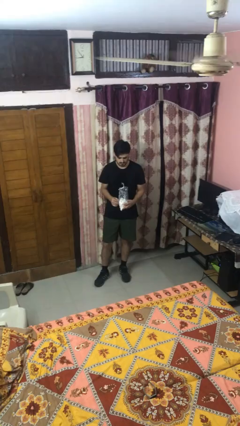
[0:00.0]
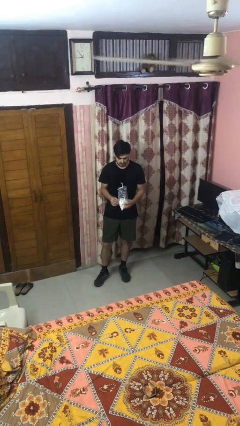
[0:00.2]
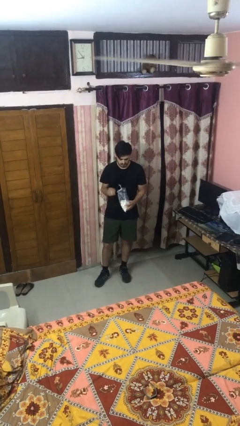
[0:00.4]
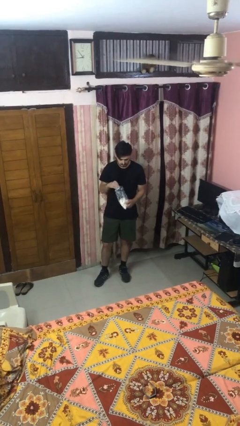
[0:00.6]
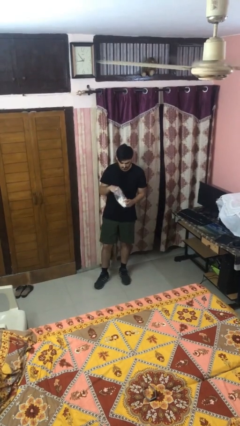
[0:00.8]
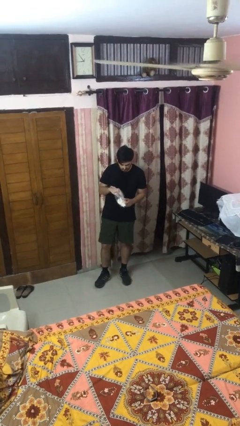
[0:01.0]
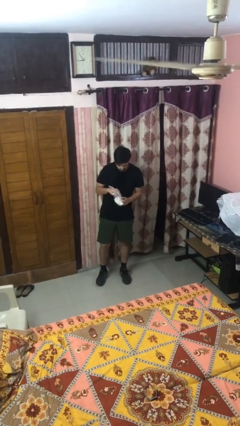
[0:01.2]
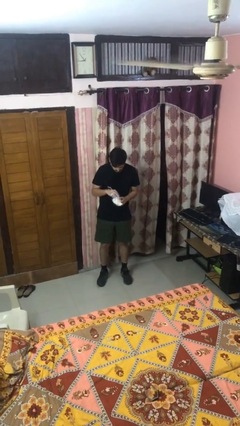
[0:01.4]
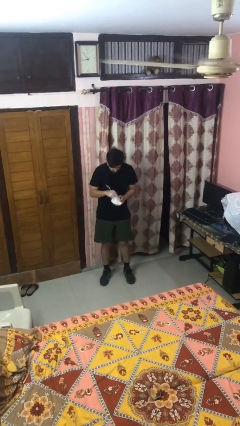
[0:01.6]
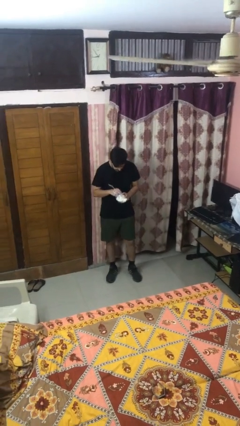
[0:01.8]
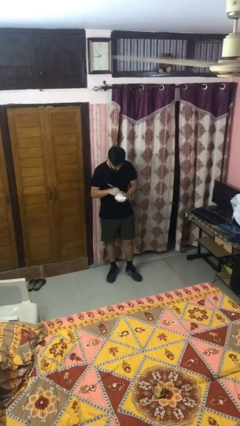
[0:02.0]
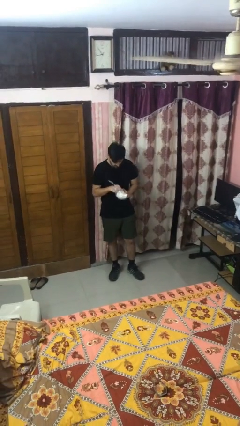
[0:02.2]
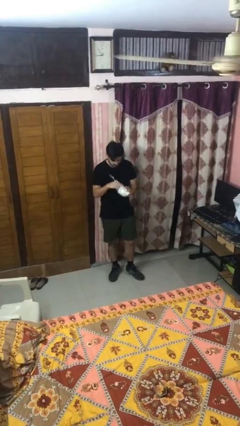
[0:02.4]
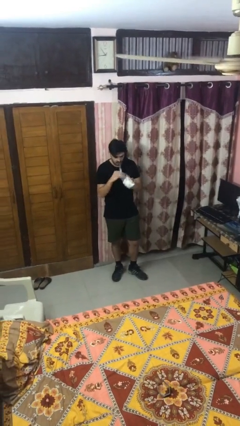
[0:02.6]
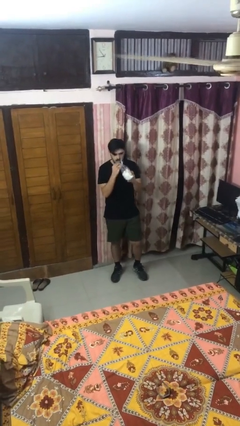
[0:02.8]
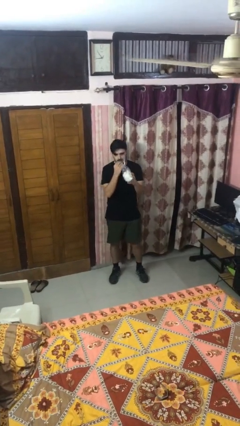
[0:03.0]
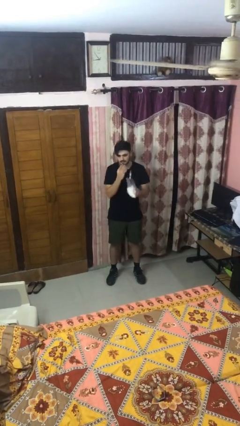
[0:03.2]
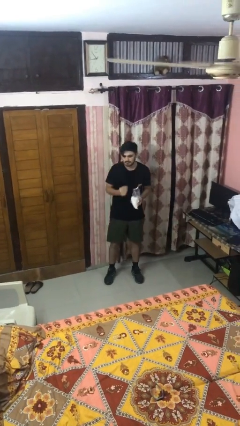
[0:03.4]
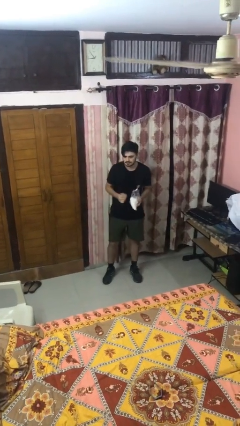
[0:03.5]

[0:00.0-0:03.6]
person eats snack from bag

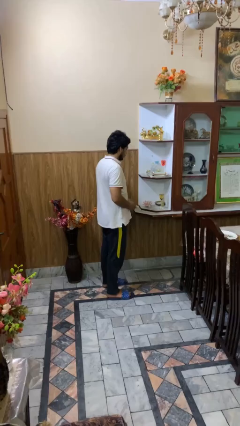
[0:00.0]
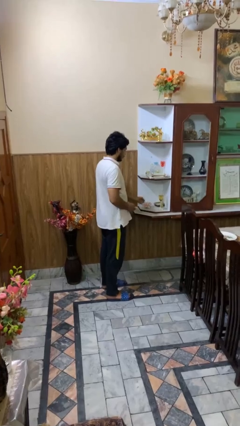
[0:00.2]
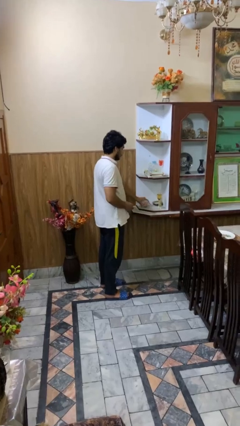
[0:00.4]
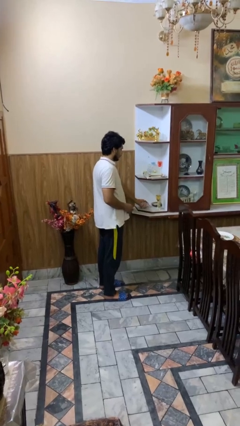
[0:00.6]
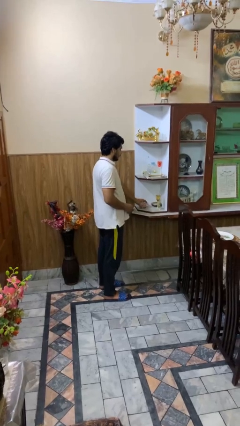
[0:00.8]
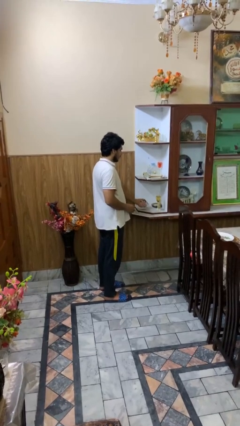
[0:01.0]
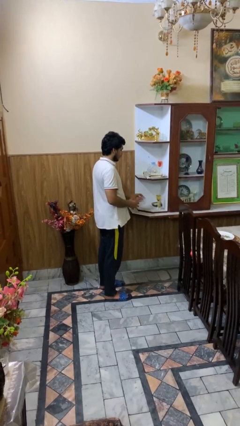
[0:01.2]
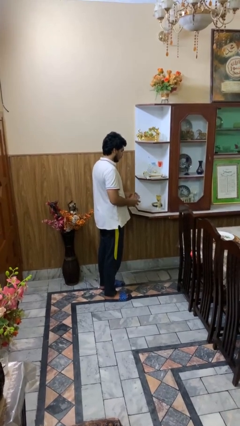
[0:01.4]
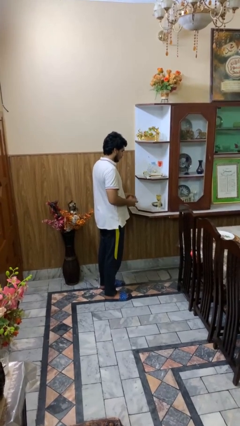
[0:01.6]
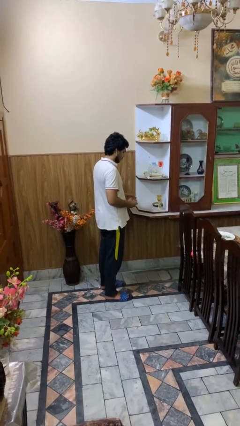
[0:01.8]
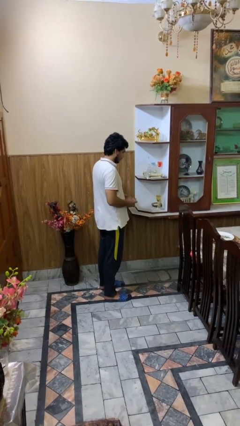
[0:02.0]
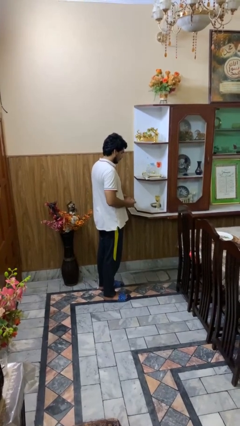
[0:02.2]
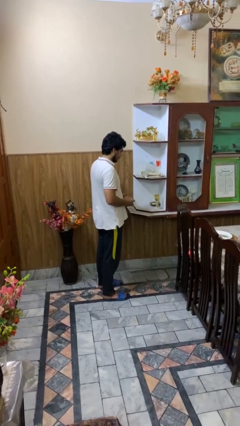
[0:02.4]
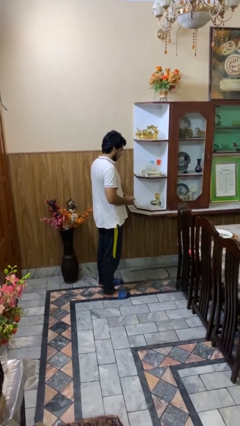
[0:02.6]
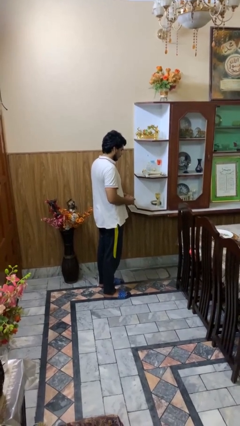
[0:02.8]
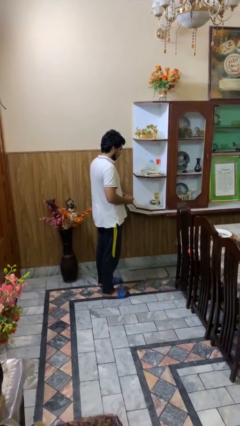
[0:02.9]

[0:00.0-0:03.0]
person picks up object from cabinet

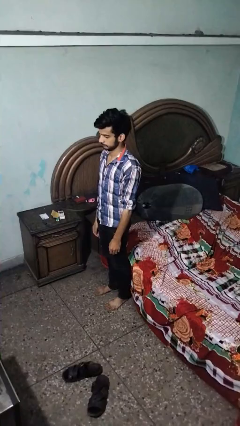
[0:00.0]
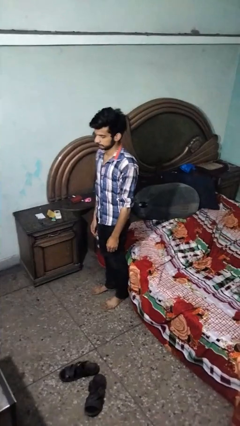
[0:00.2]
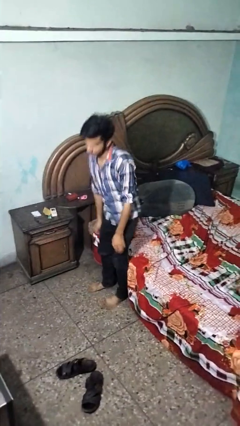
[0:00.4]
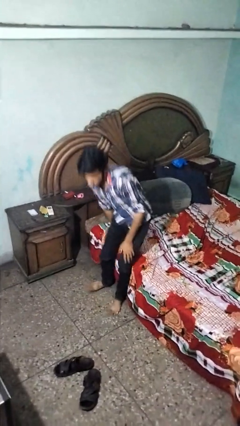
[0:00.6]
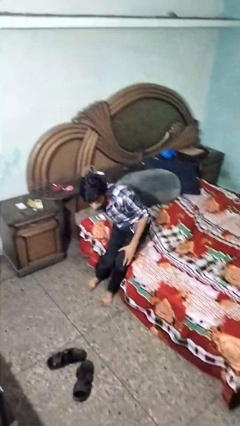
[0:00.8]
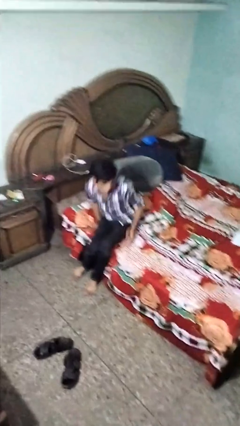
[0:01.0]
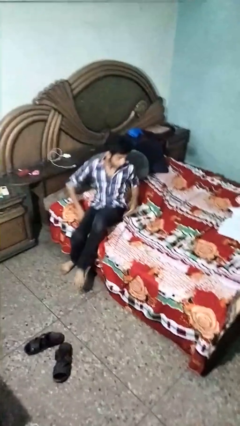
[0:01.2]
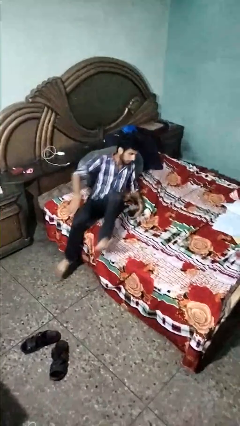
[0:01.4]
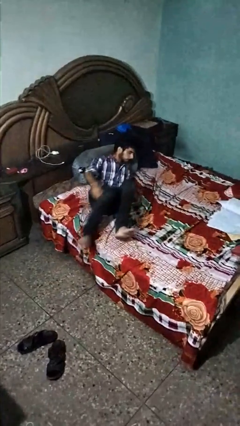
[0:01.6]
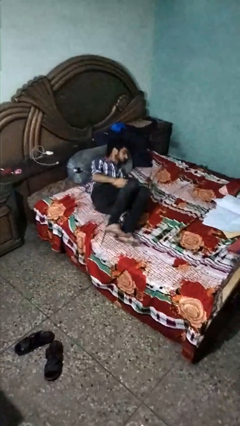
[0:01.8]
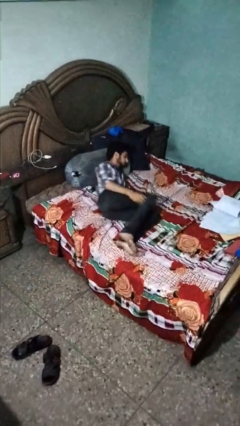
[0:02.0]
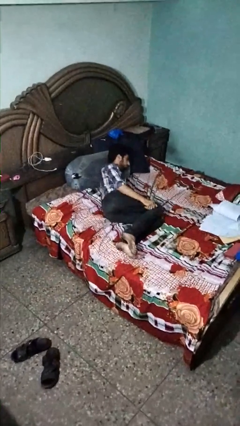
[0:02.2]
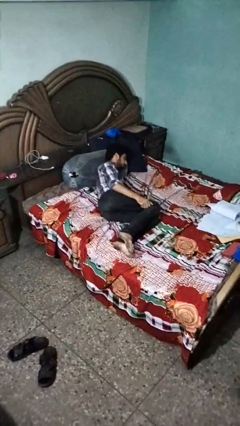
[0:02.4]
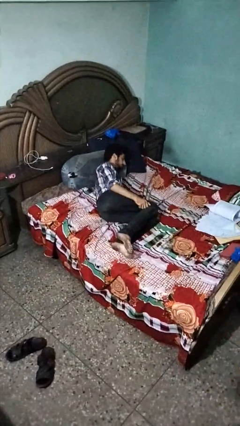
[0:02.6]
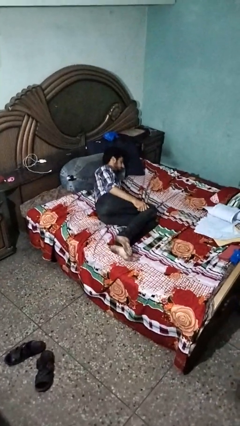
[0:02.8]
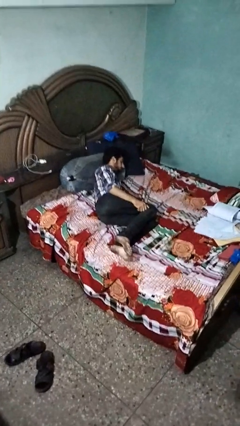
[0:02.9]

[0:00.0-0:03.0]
person lies down on bed

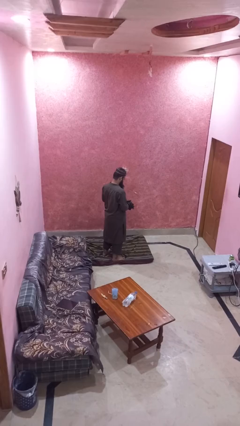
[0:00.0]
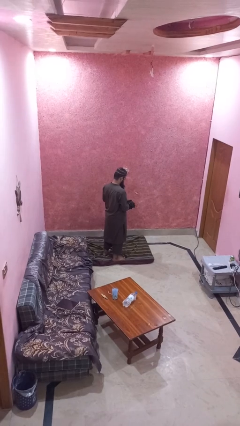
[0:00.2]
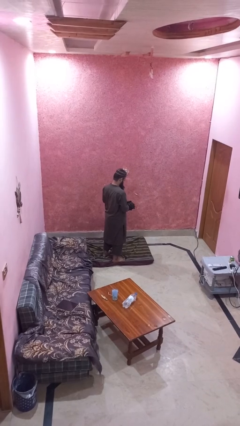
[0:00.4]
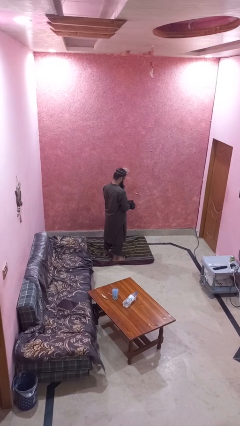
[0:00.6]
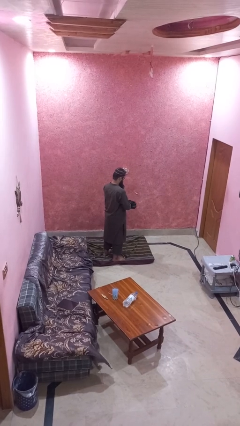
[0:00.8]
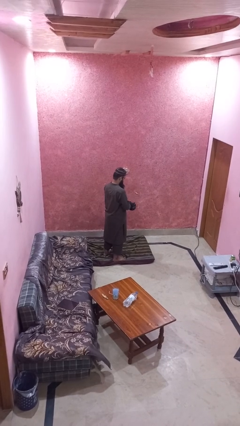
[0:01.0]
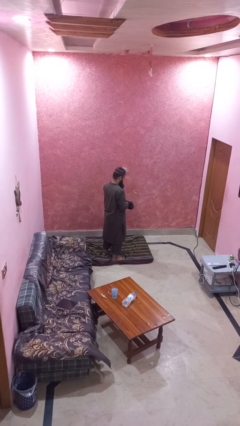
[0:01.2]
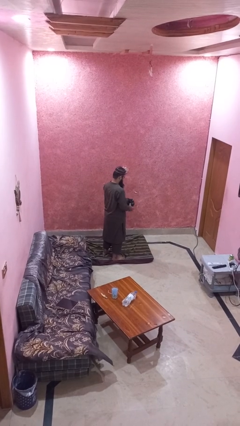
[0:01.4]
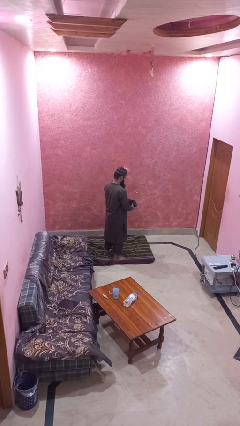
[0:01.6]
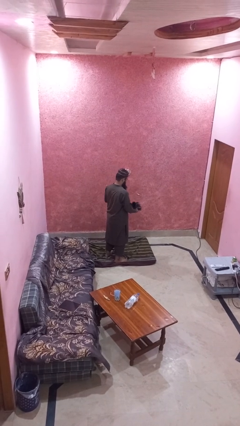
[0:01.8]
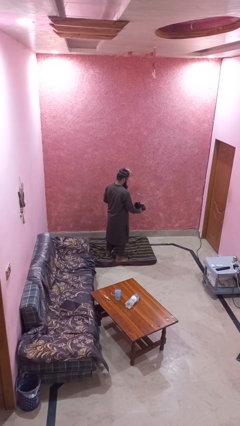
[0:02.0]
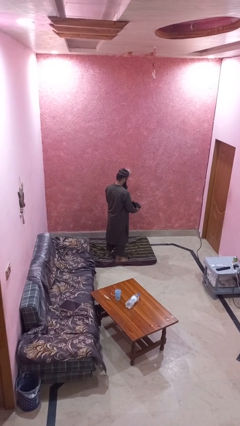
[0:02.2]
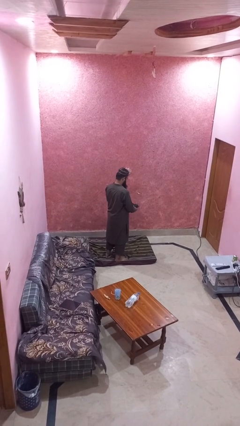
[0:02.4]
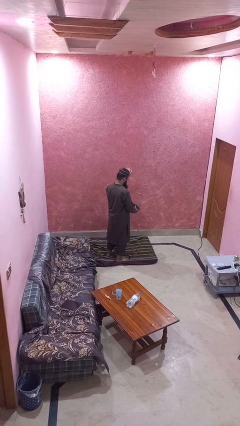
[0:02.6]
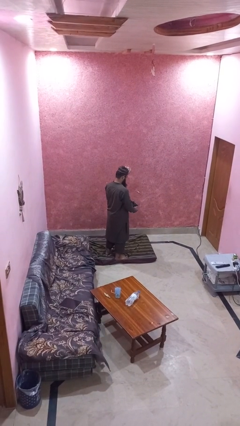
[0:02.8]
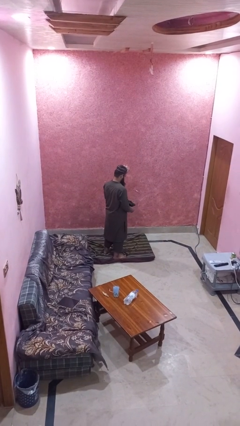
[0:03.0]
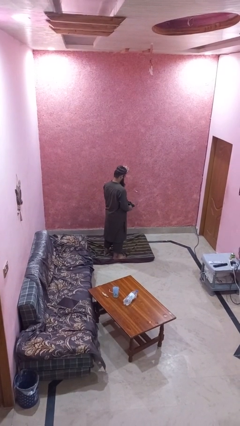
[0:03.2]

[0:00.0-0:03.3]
person takes off gloves

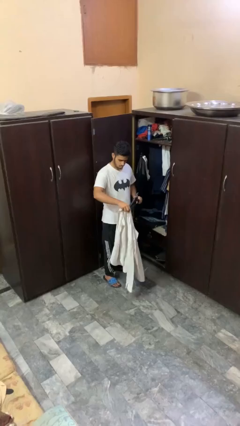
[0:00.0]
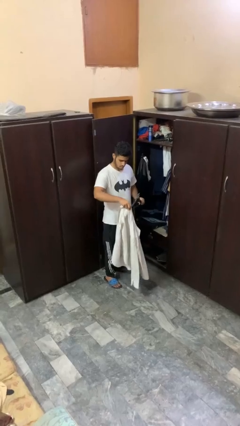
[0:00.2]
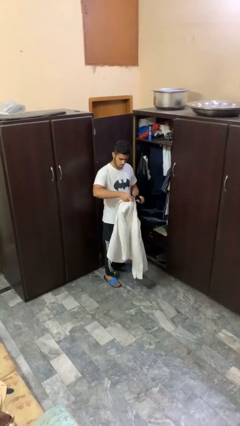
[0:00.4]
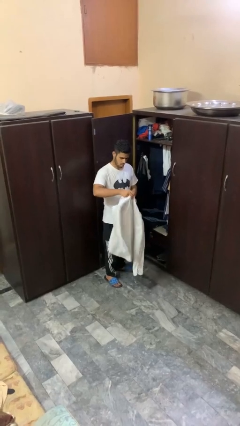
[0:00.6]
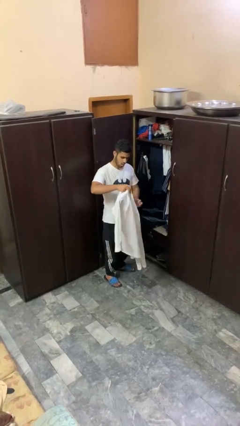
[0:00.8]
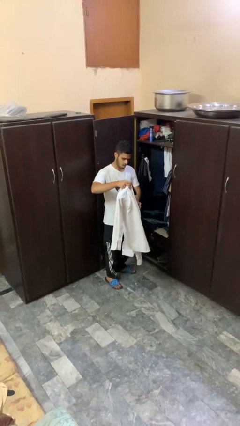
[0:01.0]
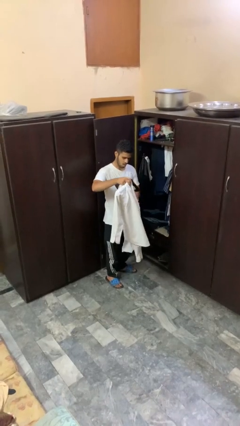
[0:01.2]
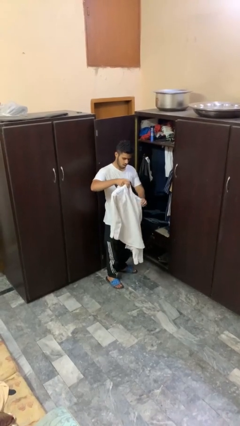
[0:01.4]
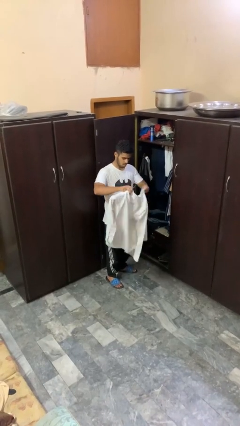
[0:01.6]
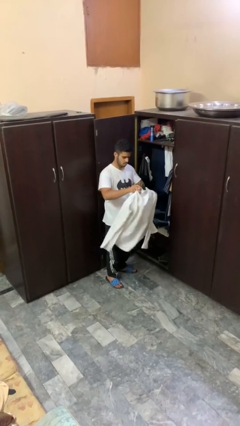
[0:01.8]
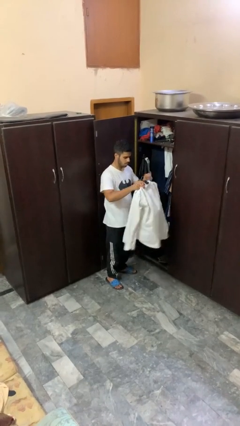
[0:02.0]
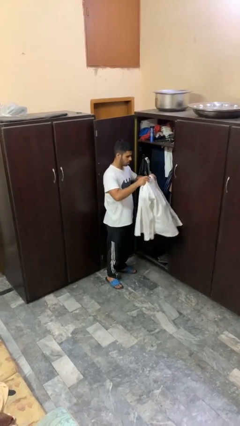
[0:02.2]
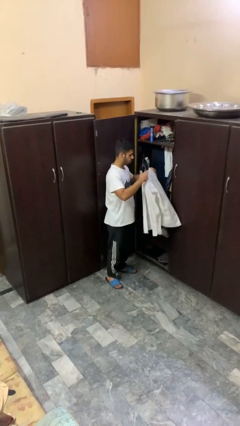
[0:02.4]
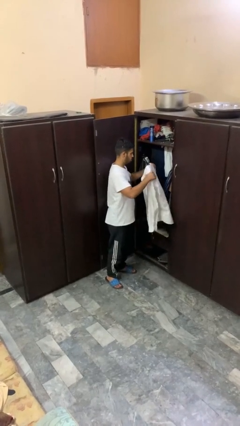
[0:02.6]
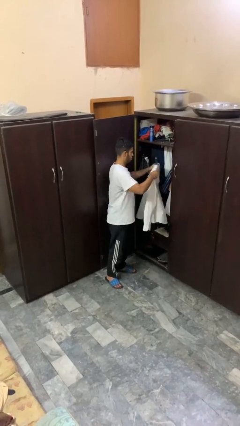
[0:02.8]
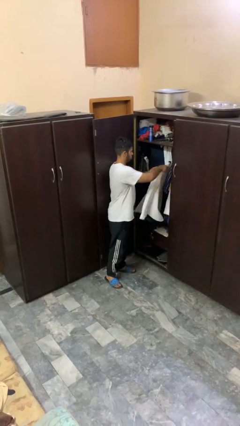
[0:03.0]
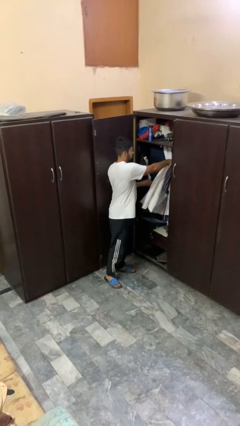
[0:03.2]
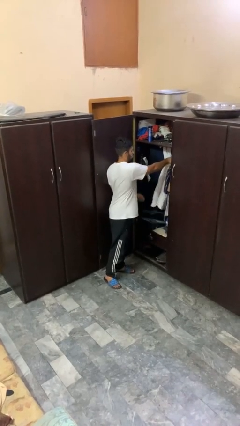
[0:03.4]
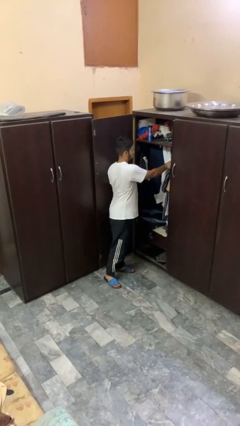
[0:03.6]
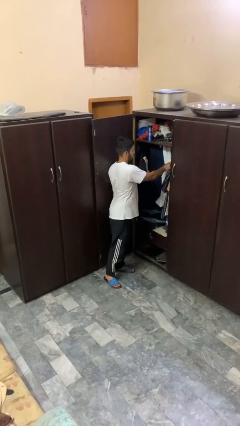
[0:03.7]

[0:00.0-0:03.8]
person puts clothes into closet

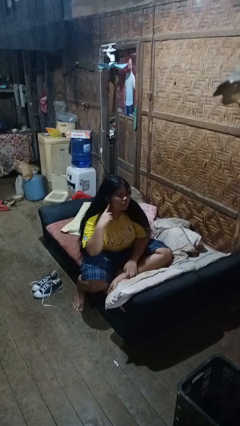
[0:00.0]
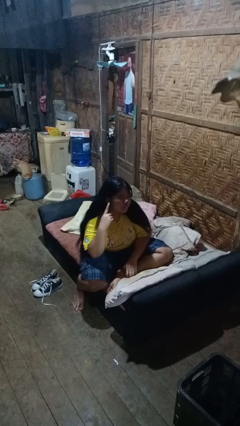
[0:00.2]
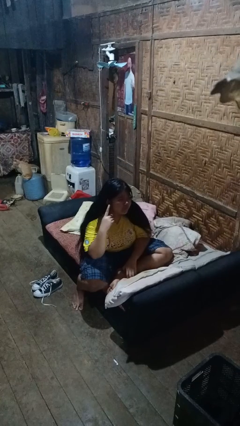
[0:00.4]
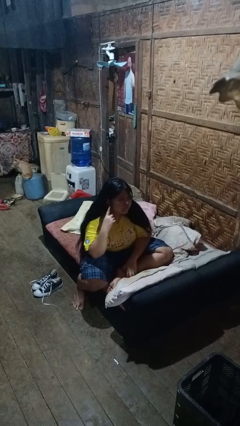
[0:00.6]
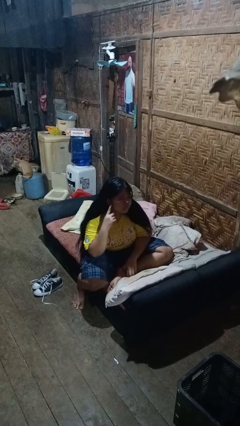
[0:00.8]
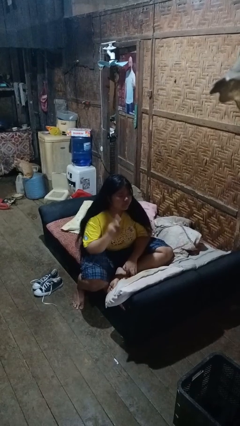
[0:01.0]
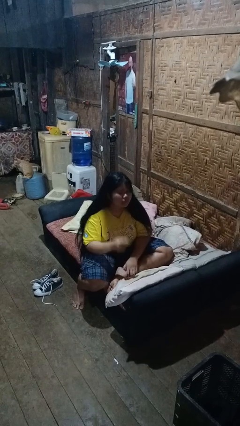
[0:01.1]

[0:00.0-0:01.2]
person gestures listen closely
